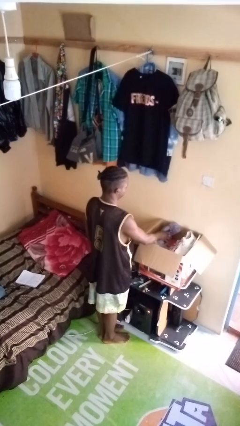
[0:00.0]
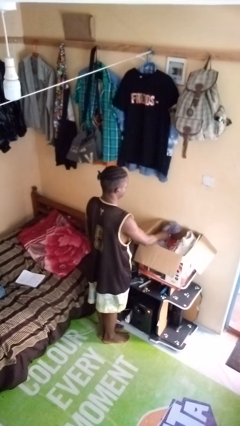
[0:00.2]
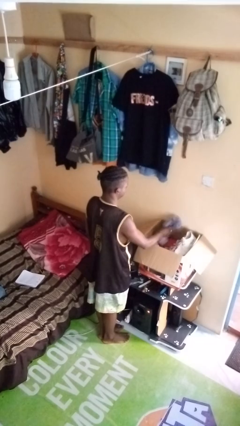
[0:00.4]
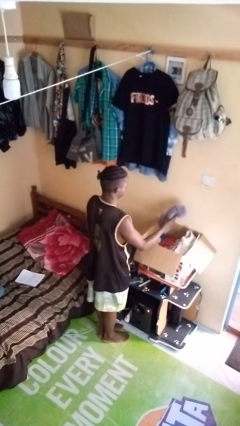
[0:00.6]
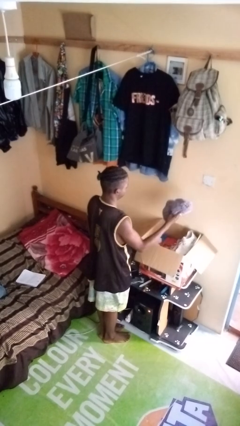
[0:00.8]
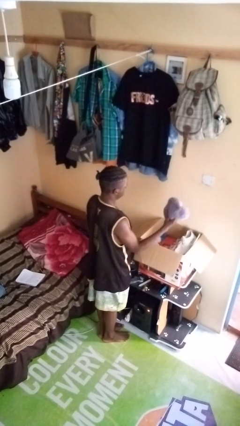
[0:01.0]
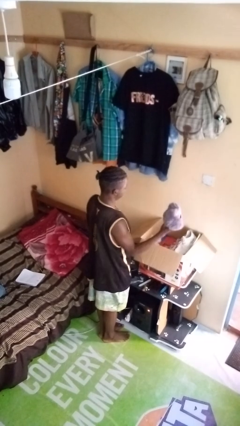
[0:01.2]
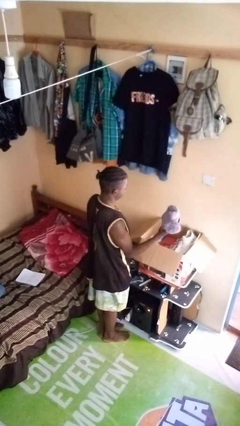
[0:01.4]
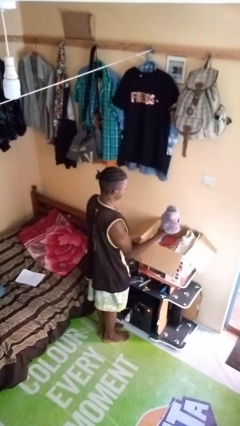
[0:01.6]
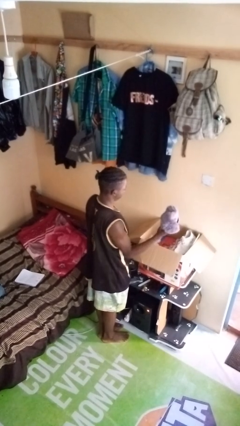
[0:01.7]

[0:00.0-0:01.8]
person takes object from box

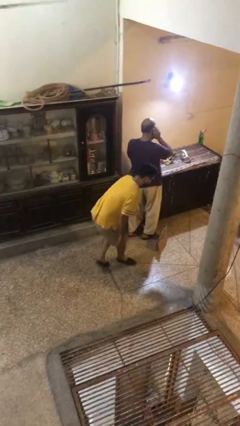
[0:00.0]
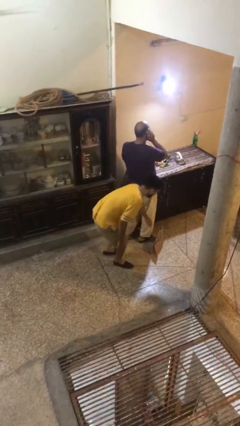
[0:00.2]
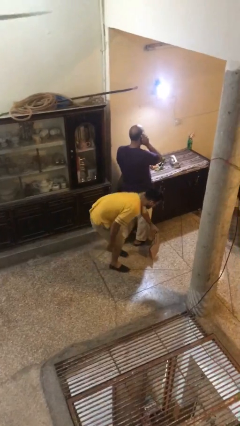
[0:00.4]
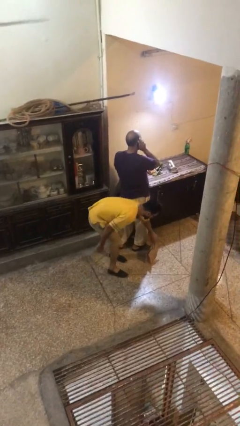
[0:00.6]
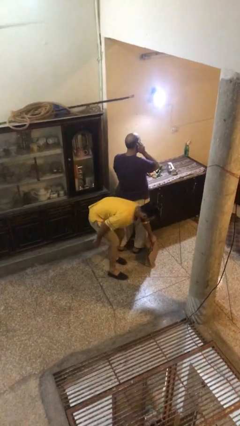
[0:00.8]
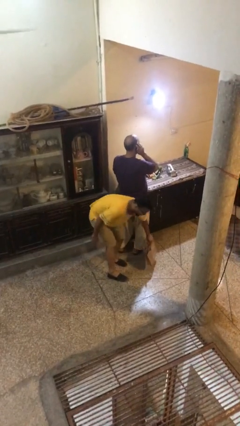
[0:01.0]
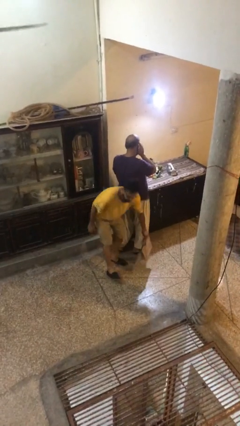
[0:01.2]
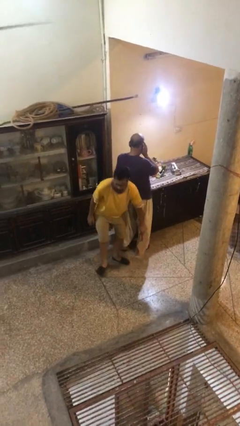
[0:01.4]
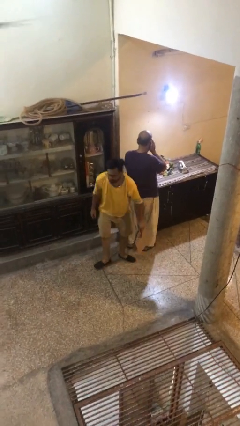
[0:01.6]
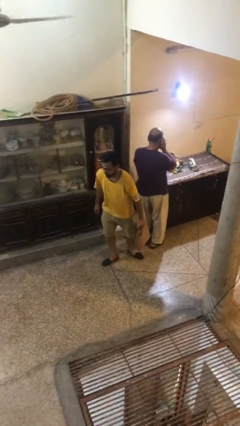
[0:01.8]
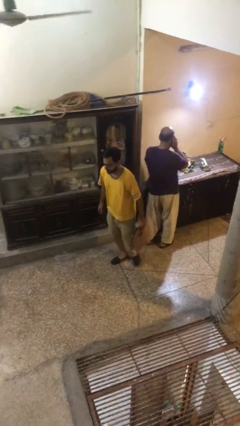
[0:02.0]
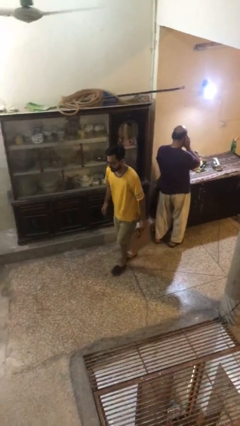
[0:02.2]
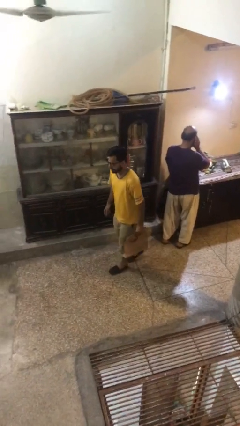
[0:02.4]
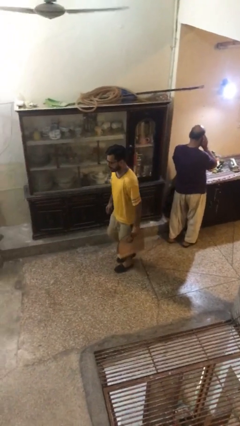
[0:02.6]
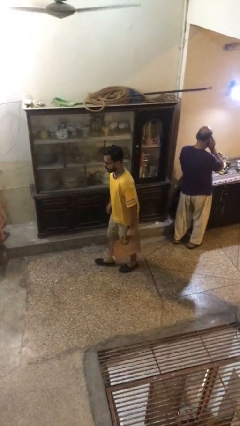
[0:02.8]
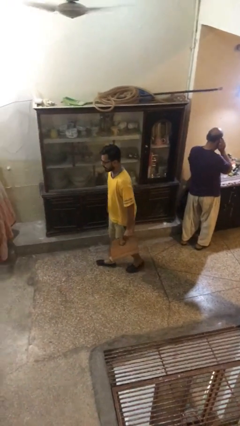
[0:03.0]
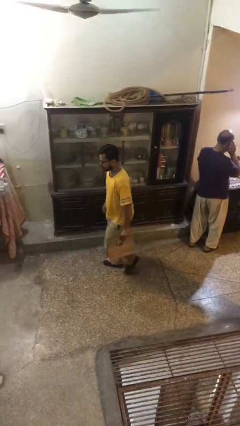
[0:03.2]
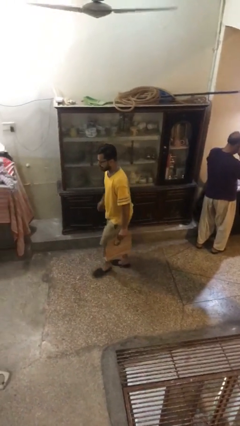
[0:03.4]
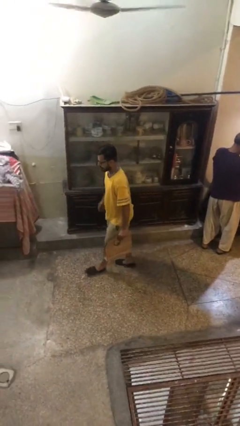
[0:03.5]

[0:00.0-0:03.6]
person steals object from person

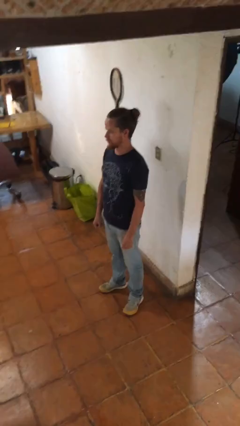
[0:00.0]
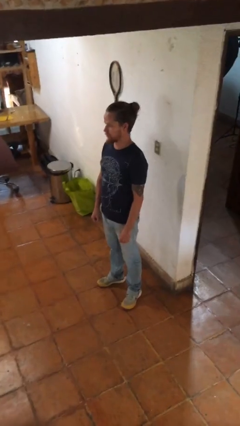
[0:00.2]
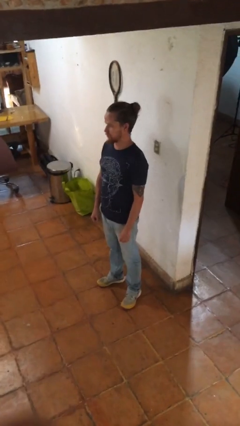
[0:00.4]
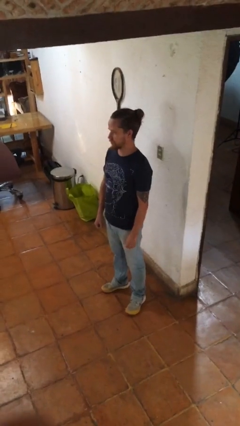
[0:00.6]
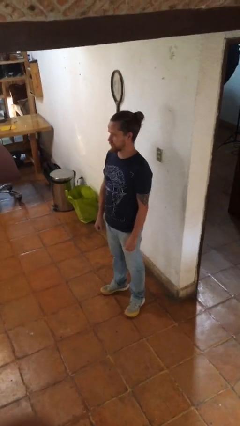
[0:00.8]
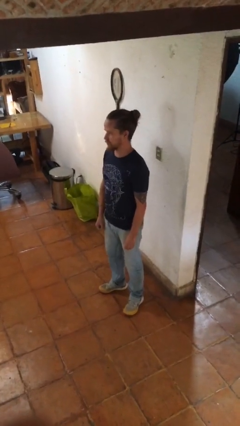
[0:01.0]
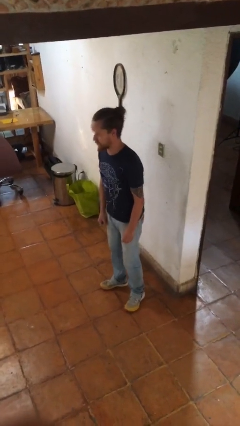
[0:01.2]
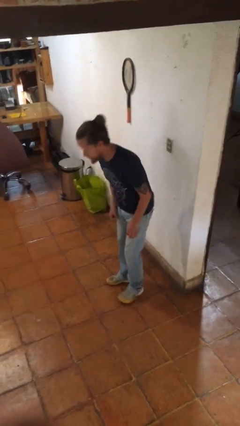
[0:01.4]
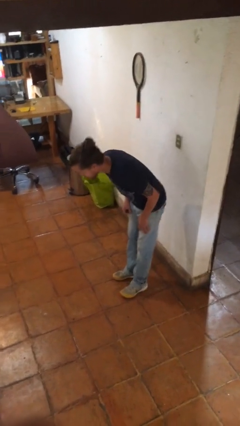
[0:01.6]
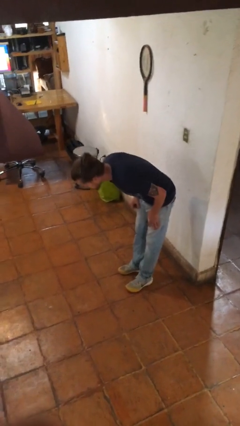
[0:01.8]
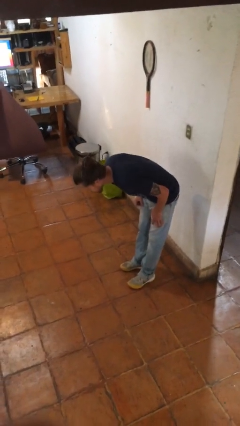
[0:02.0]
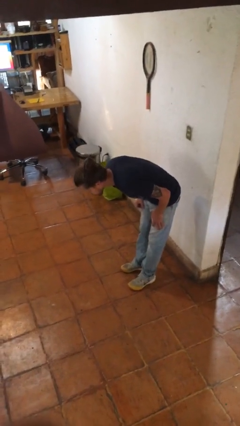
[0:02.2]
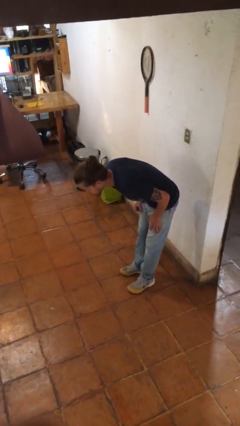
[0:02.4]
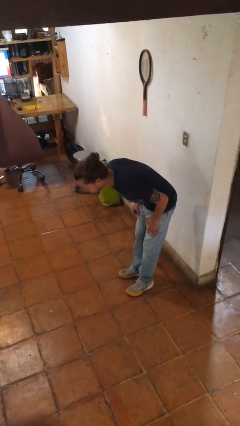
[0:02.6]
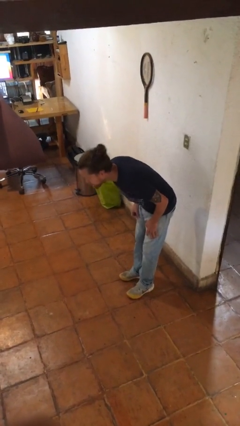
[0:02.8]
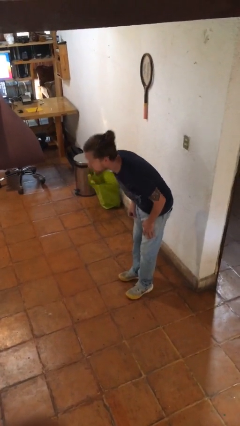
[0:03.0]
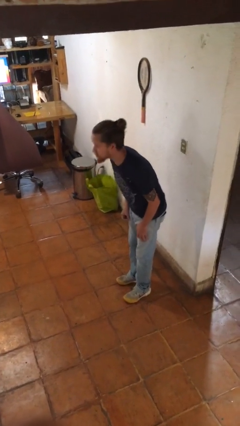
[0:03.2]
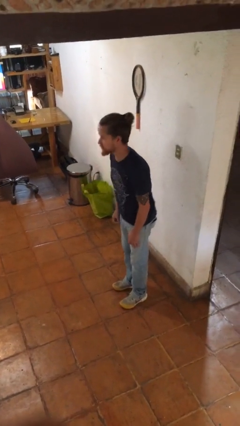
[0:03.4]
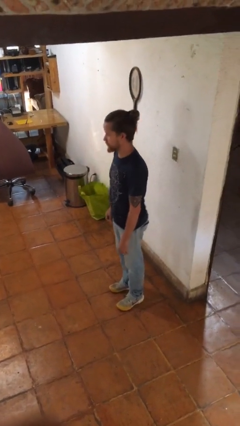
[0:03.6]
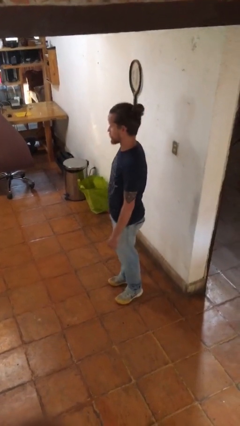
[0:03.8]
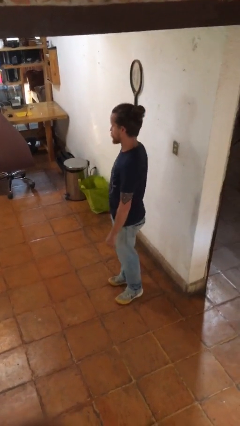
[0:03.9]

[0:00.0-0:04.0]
person bows

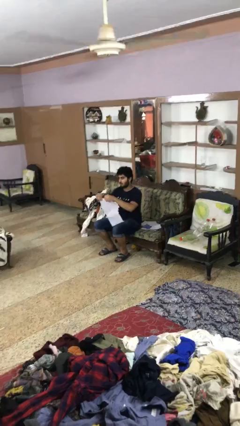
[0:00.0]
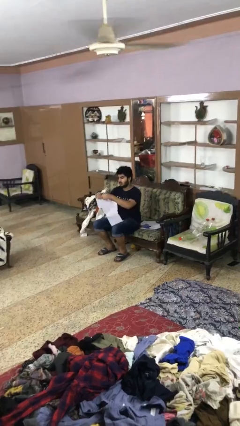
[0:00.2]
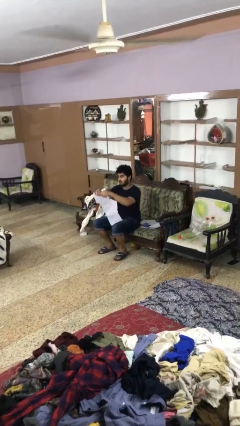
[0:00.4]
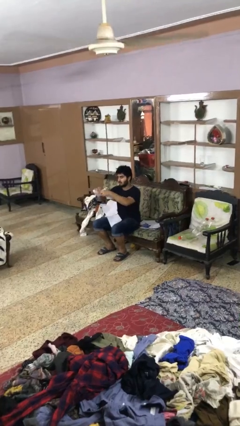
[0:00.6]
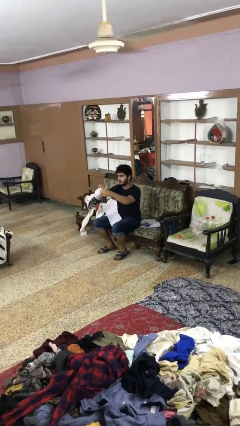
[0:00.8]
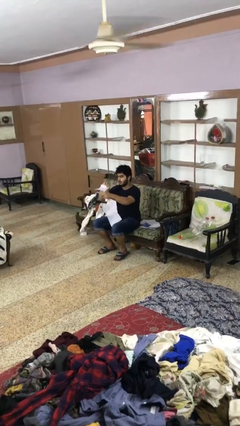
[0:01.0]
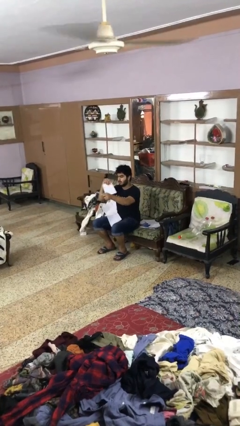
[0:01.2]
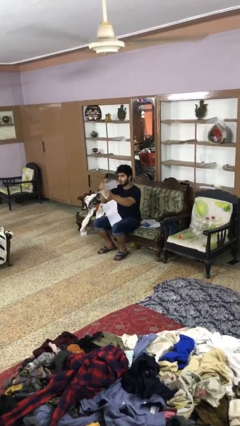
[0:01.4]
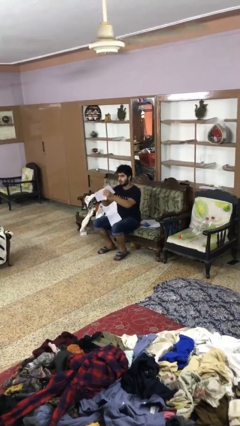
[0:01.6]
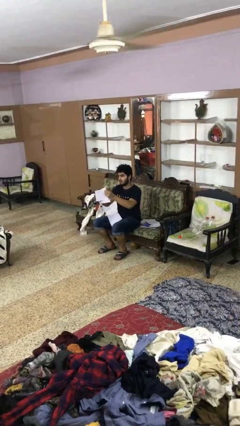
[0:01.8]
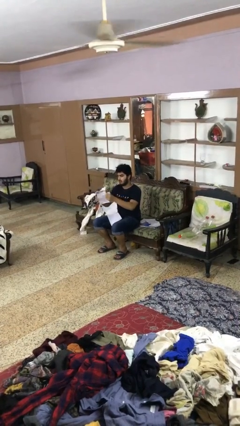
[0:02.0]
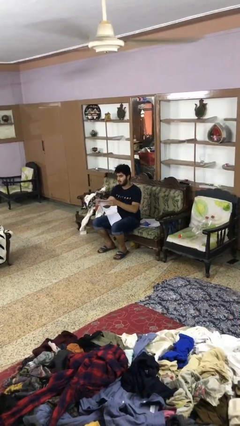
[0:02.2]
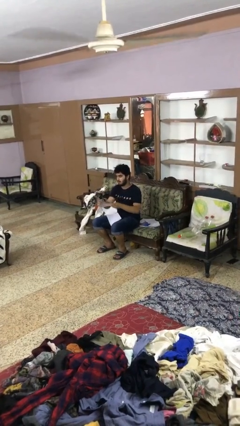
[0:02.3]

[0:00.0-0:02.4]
person tears paper

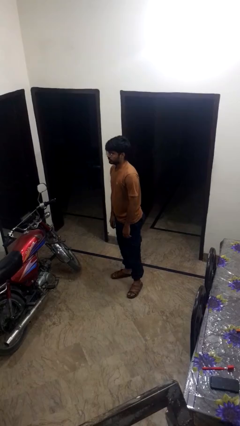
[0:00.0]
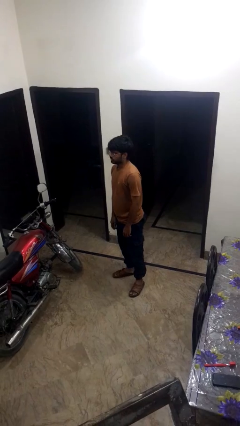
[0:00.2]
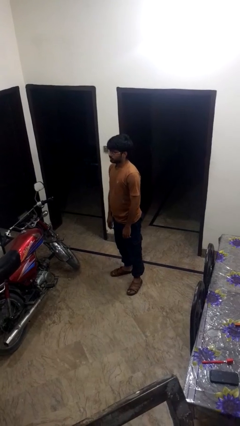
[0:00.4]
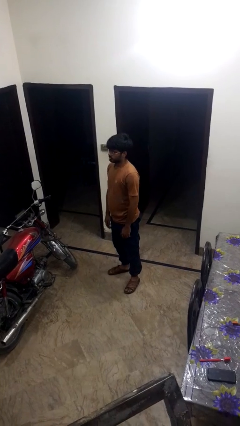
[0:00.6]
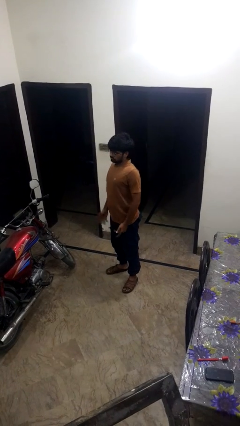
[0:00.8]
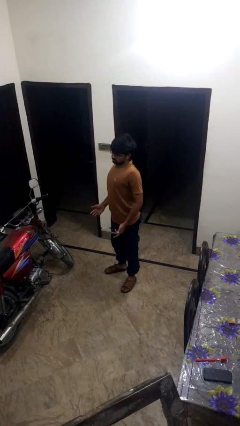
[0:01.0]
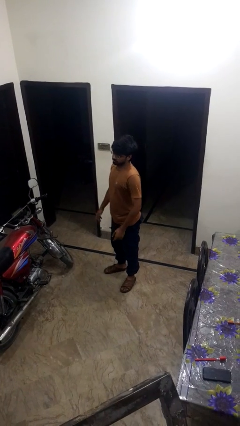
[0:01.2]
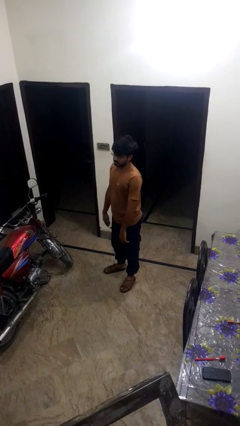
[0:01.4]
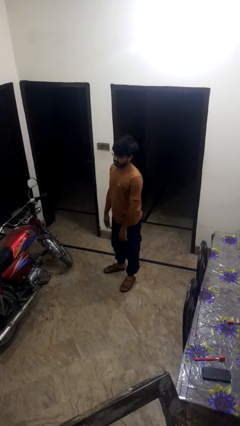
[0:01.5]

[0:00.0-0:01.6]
person shrugs

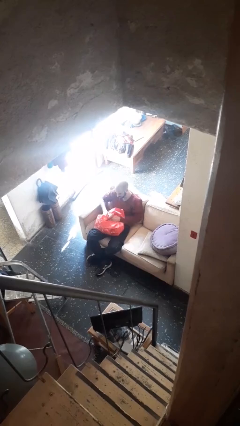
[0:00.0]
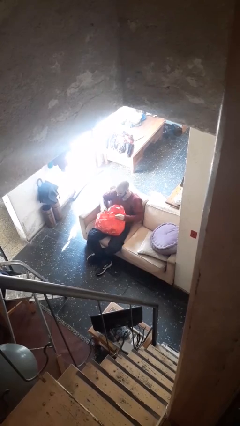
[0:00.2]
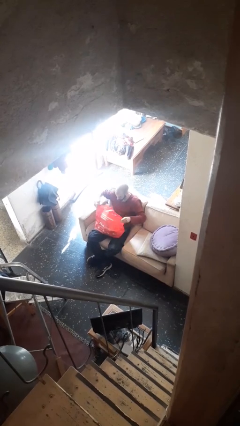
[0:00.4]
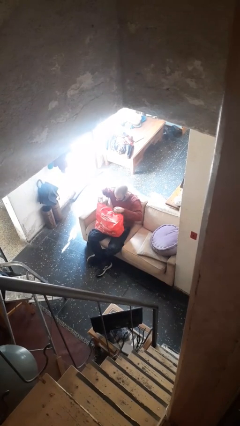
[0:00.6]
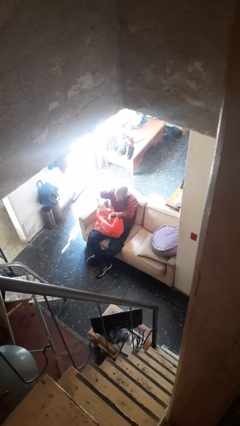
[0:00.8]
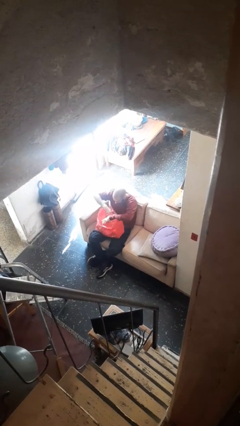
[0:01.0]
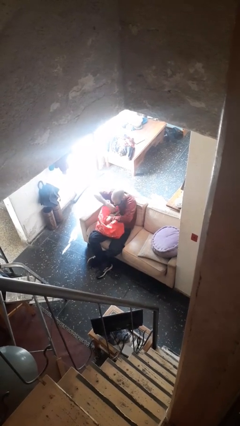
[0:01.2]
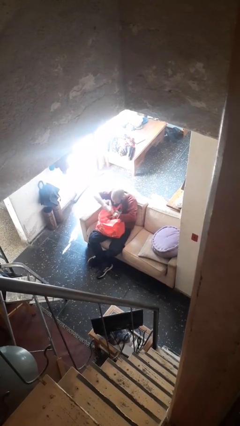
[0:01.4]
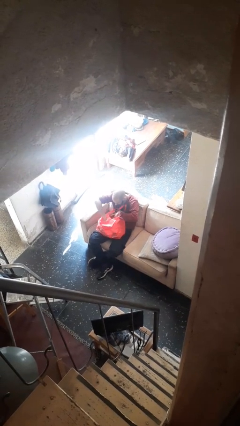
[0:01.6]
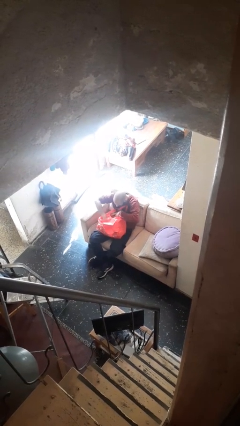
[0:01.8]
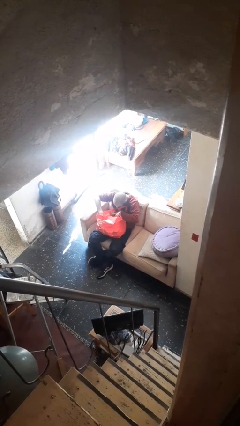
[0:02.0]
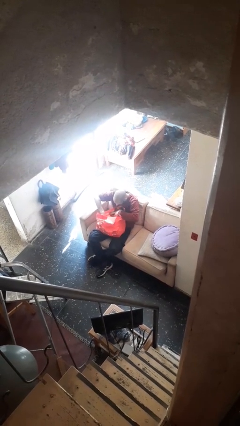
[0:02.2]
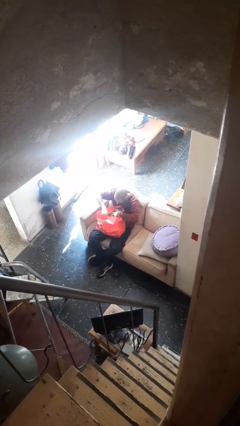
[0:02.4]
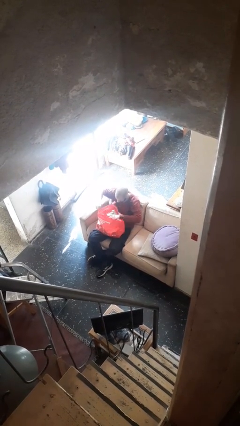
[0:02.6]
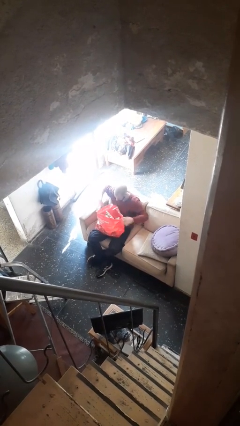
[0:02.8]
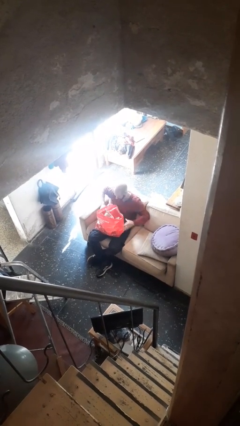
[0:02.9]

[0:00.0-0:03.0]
person searches in bag

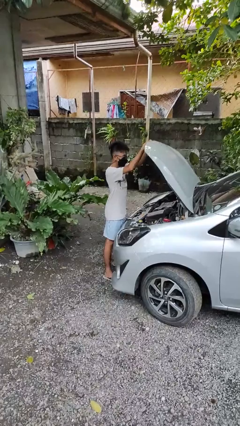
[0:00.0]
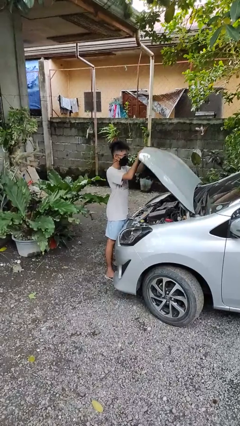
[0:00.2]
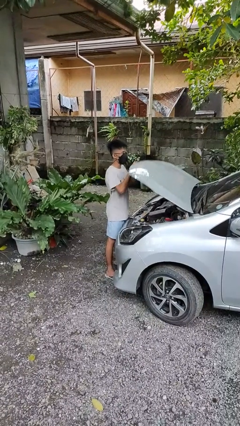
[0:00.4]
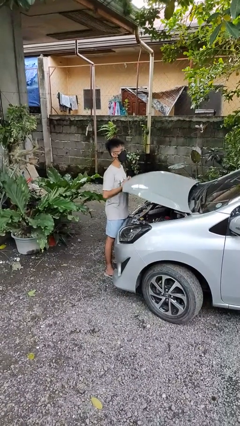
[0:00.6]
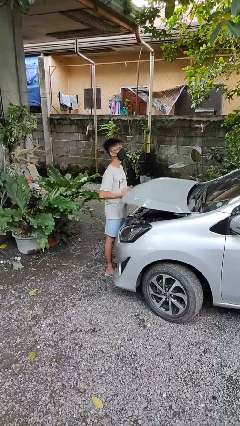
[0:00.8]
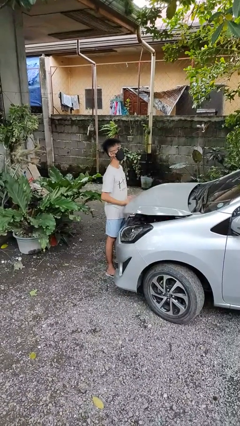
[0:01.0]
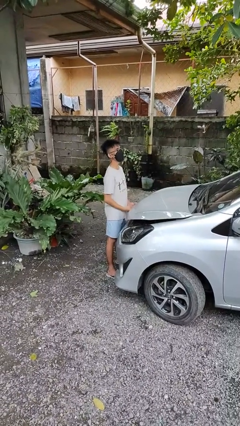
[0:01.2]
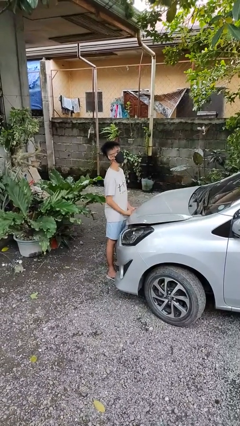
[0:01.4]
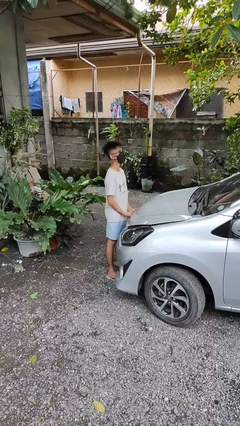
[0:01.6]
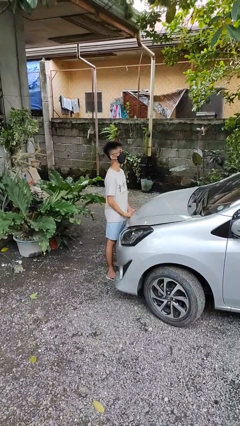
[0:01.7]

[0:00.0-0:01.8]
person closes car hood
